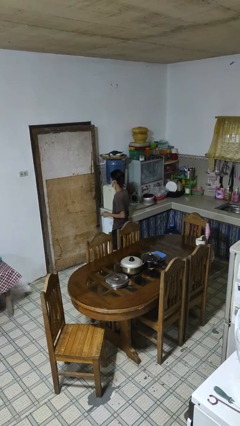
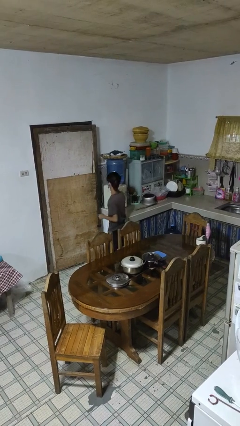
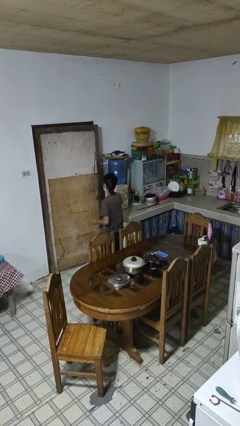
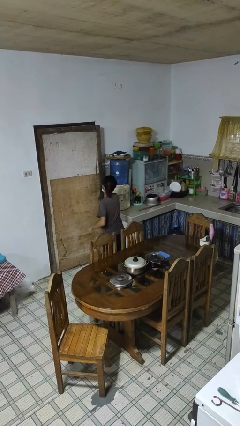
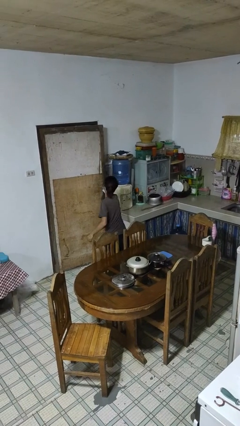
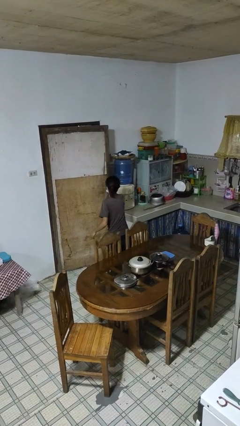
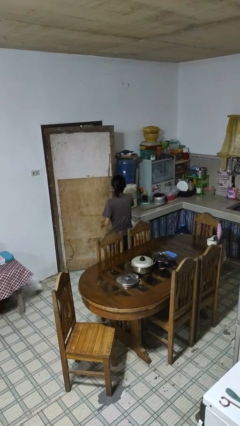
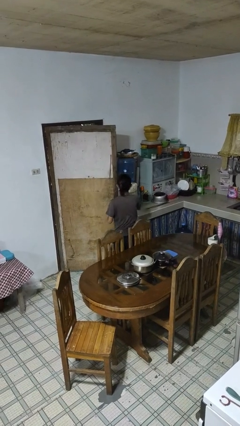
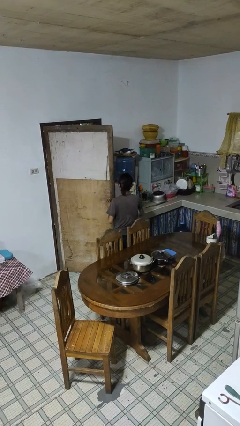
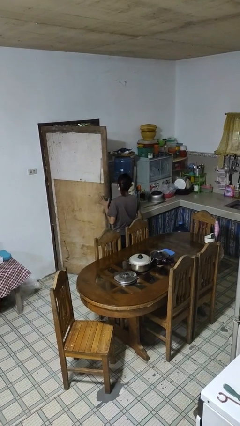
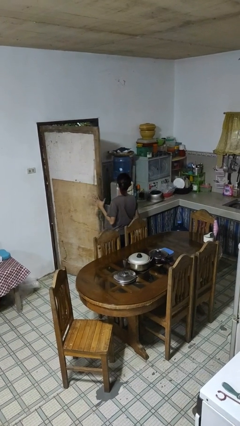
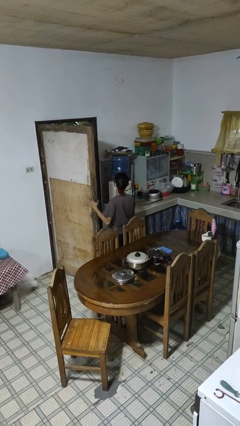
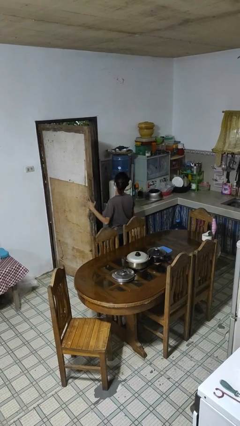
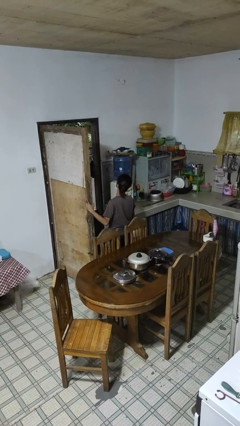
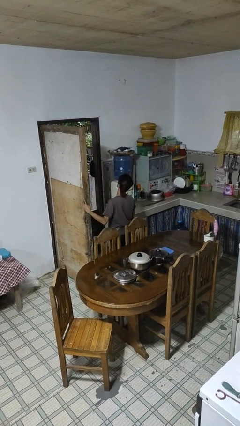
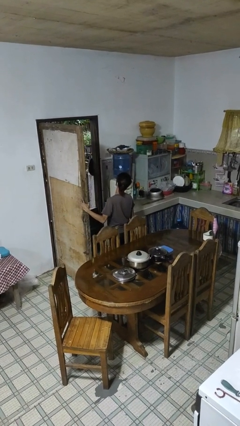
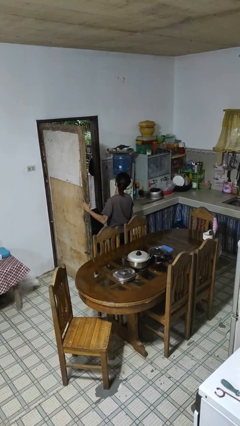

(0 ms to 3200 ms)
person opens facility door

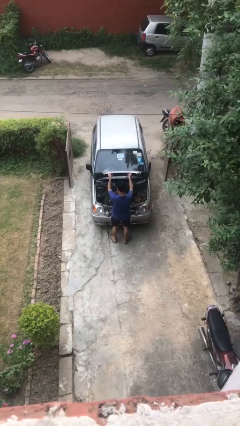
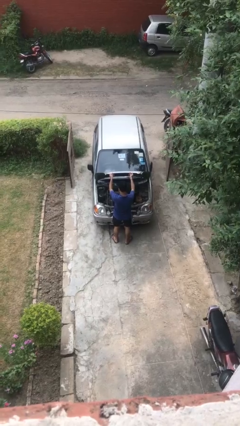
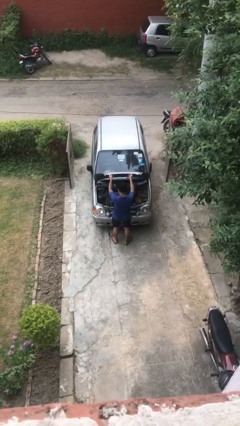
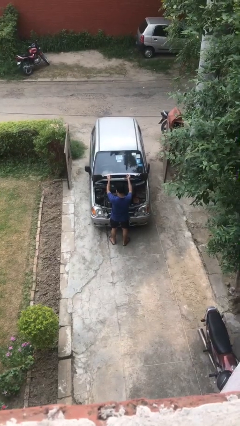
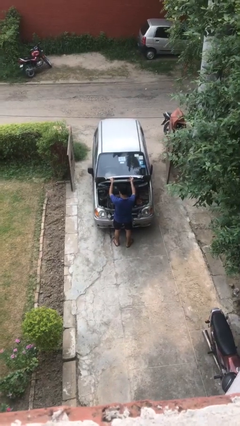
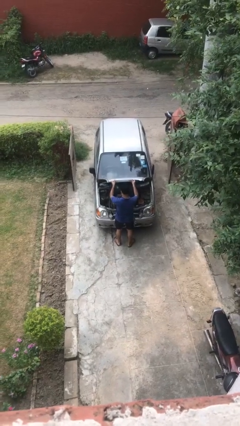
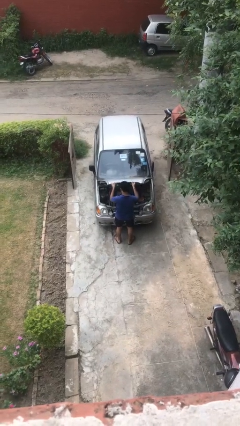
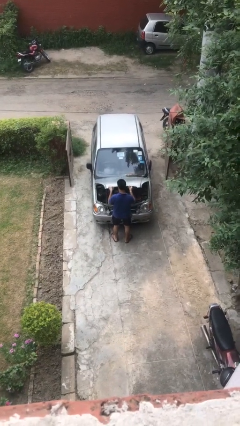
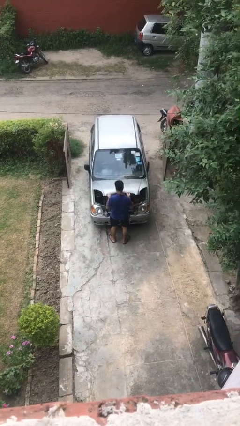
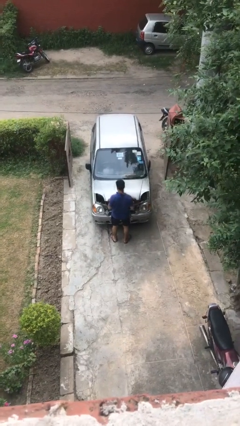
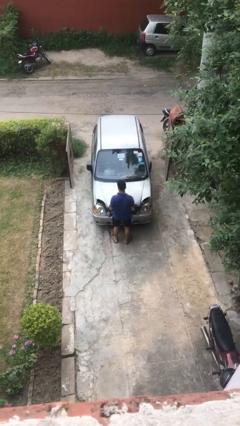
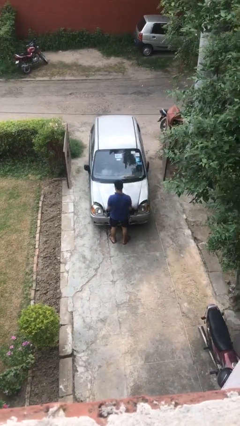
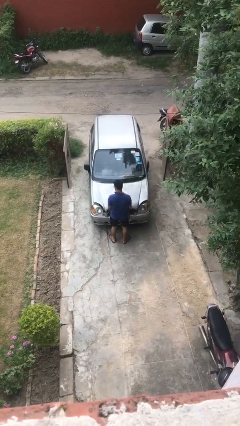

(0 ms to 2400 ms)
person closes car hood

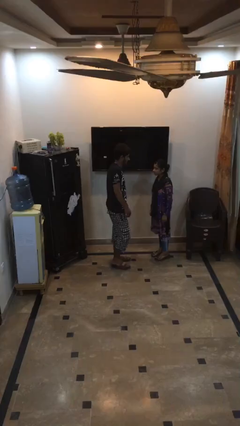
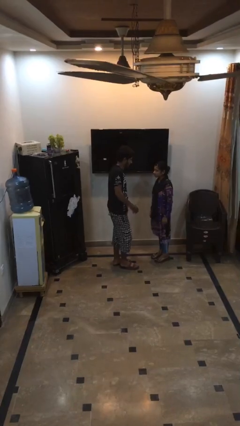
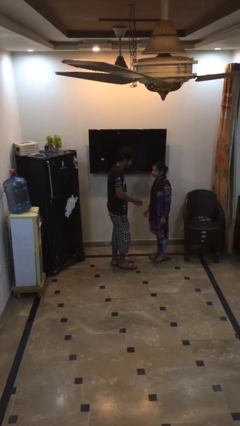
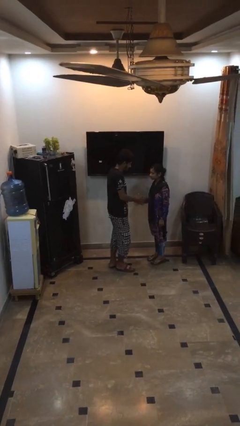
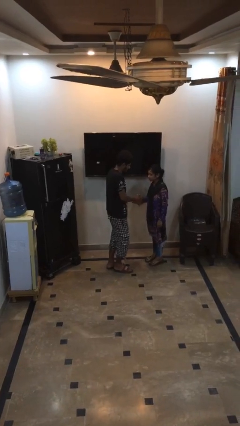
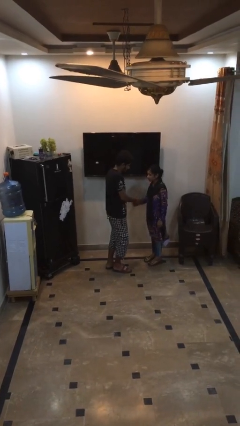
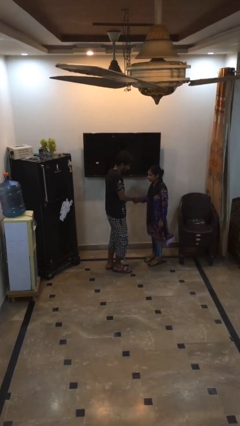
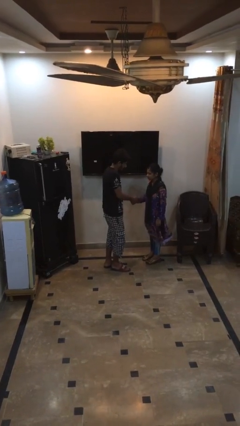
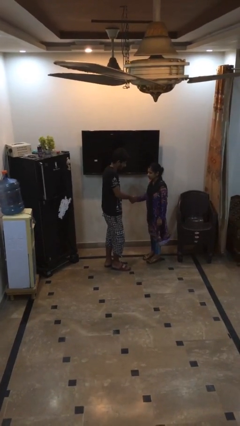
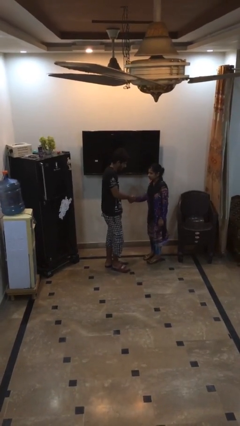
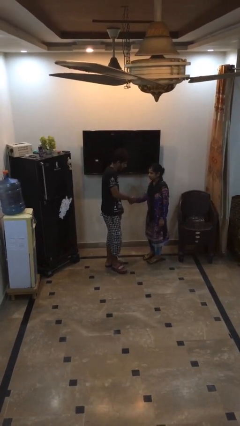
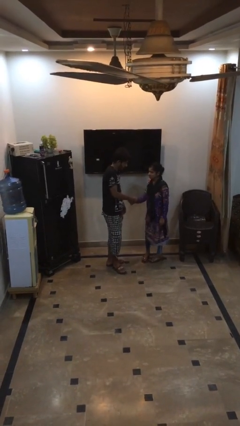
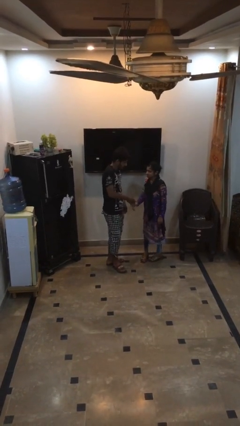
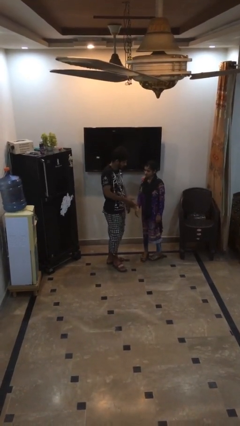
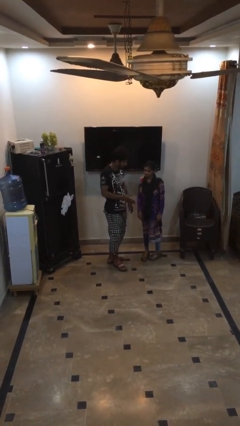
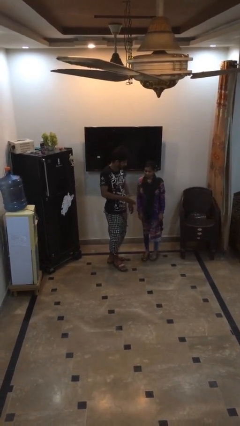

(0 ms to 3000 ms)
person shakes hand

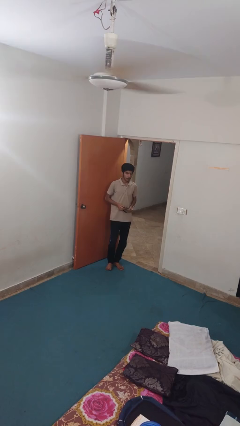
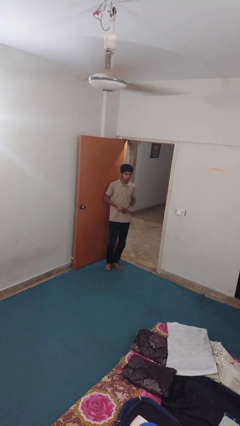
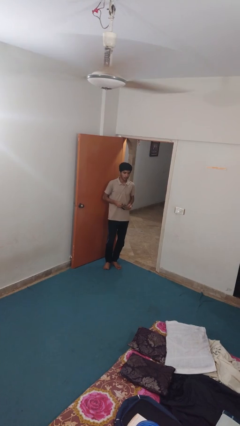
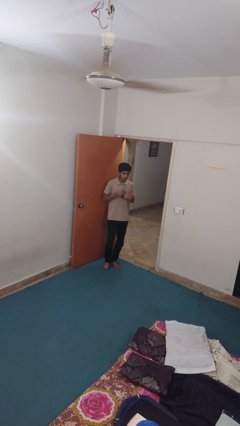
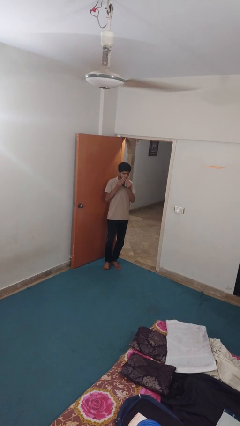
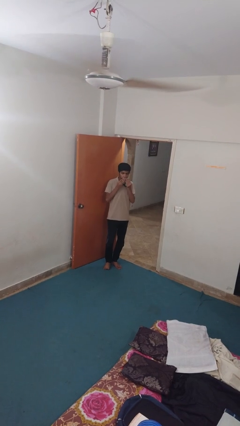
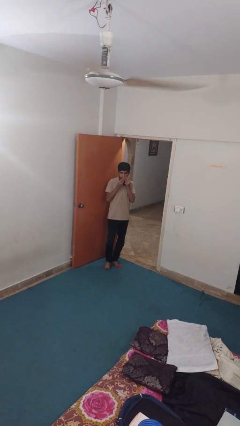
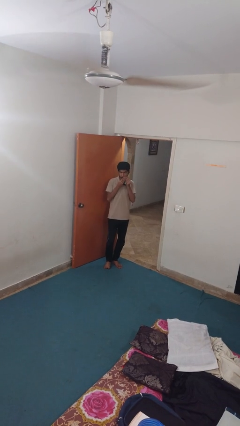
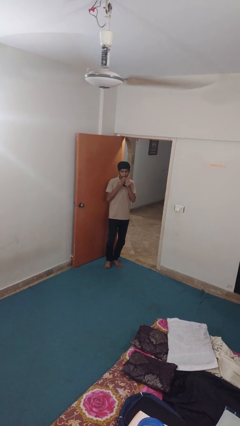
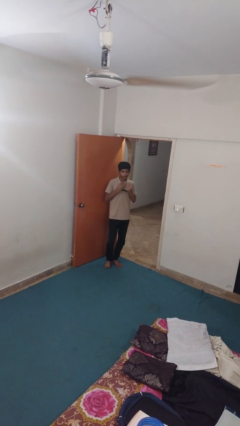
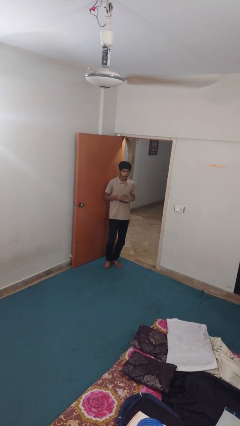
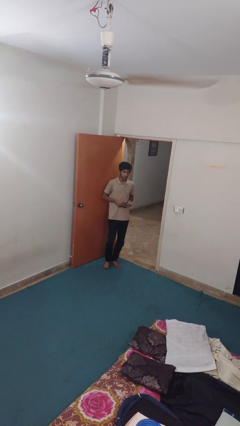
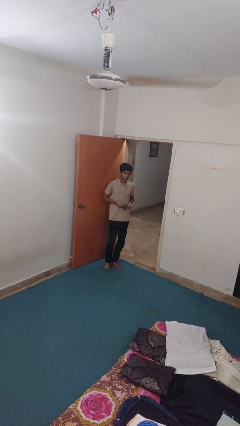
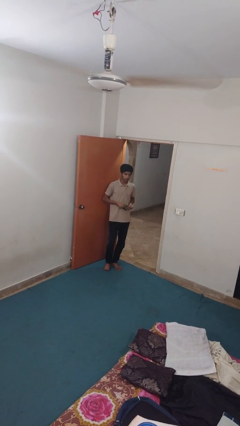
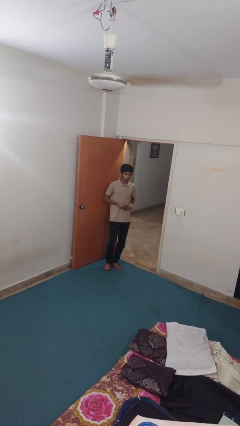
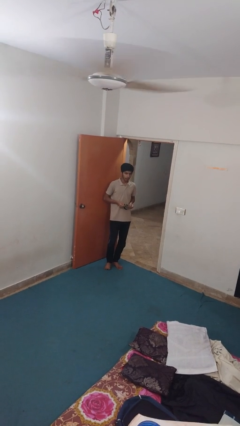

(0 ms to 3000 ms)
person wipes mouth with napkin

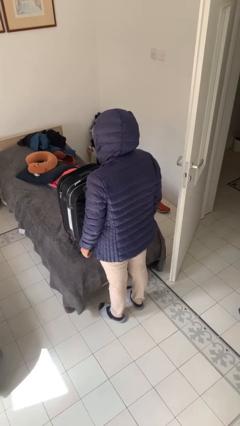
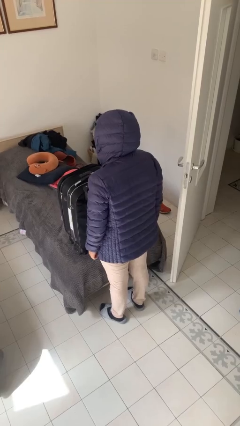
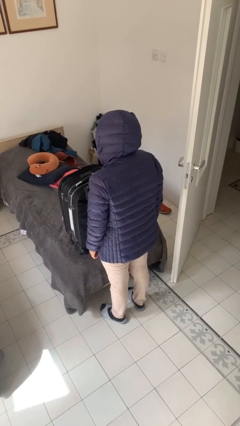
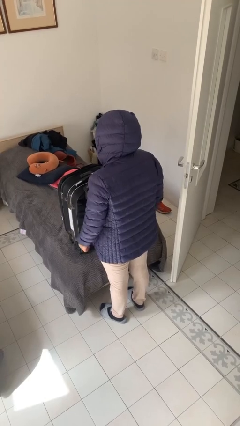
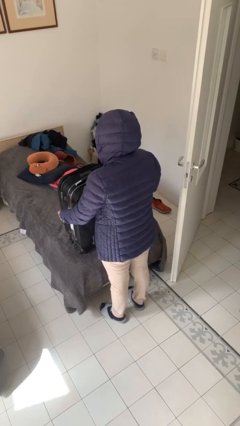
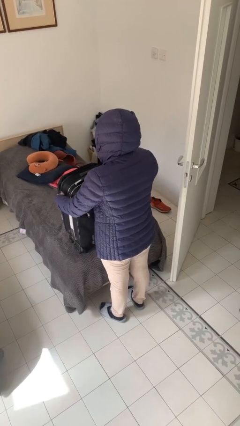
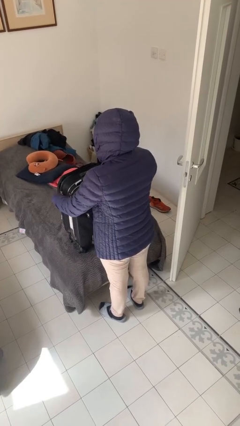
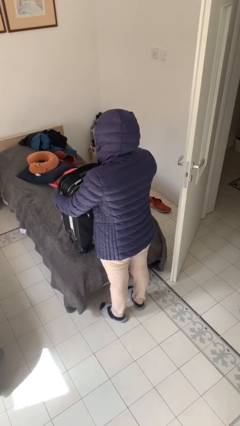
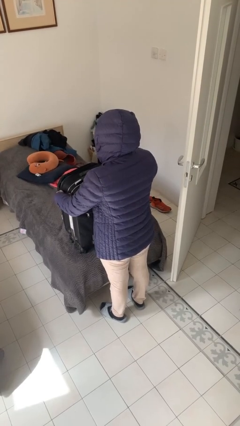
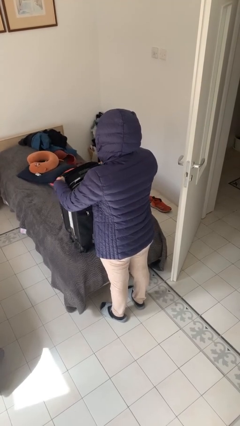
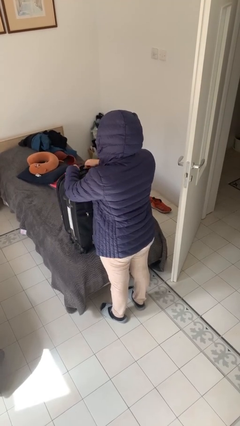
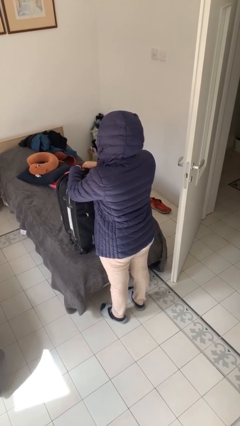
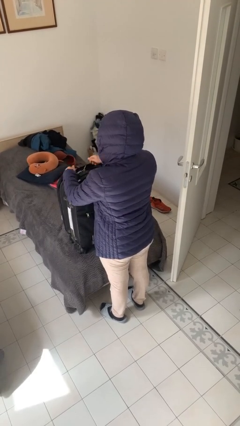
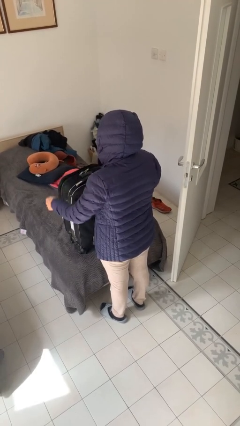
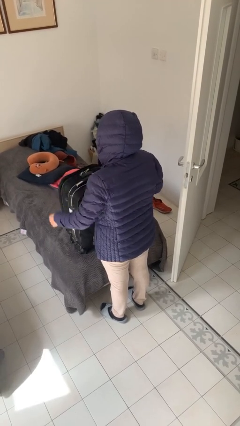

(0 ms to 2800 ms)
person closes suitcase

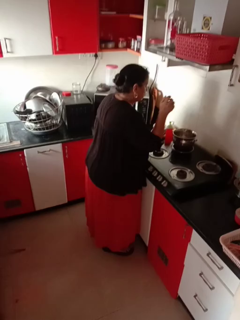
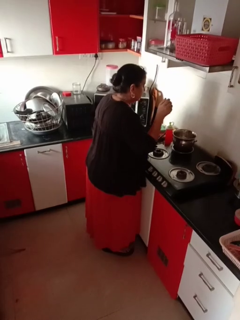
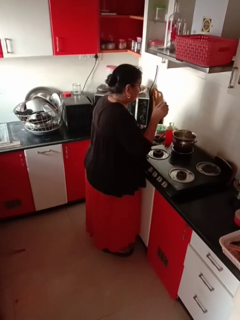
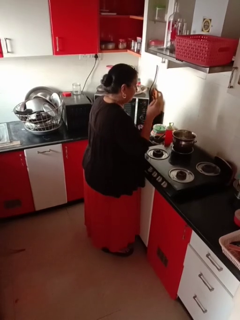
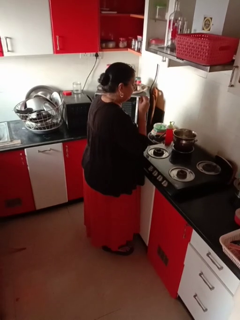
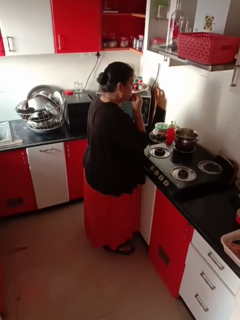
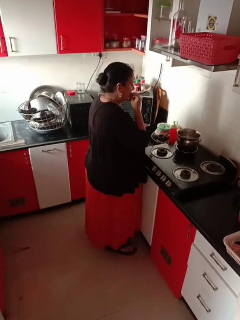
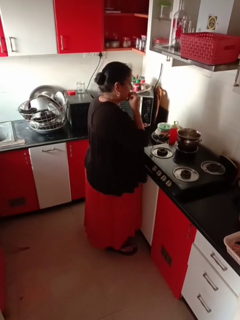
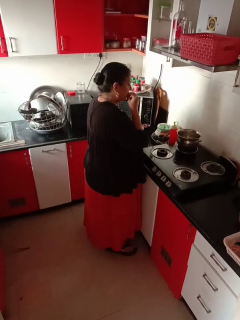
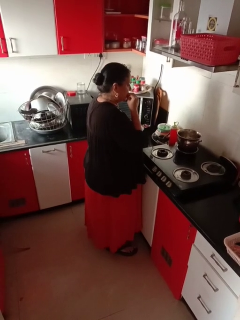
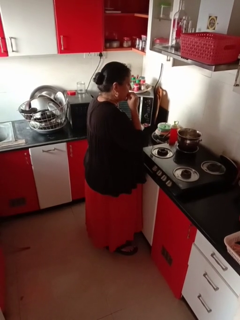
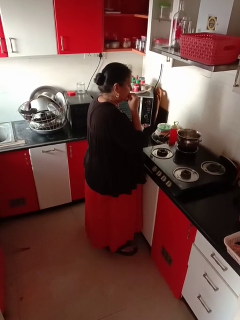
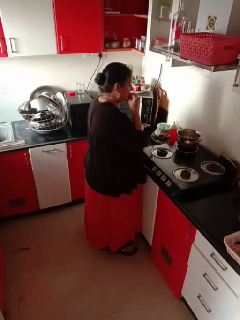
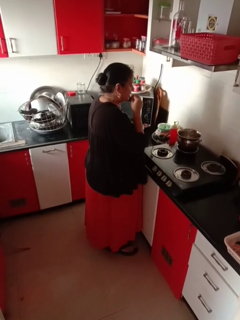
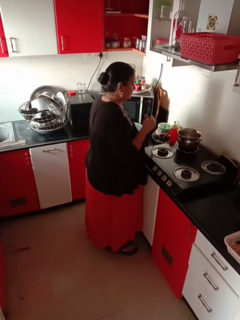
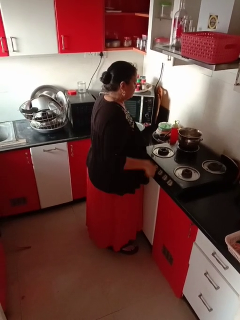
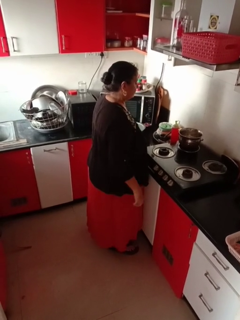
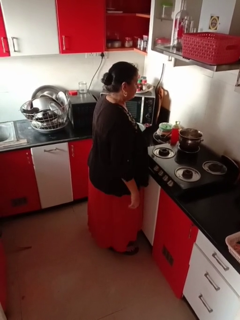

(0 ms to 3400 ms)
person burns hand

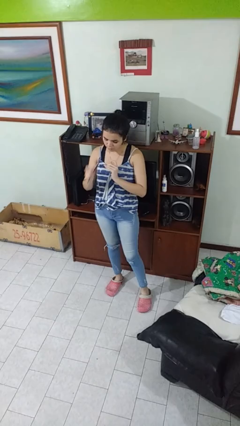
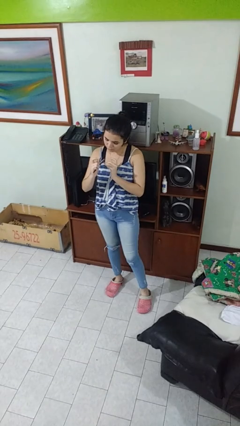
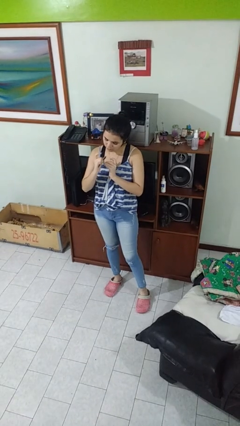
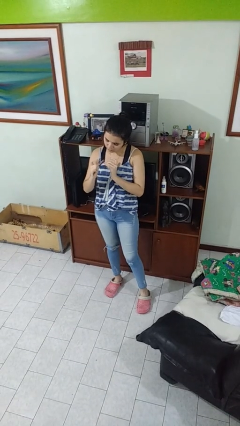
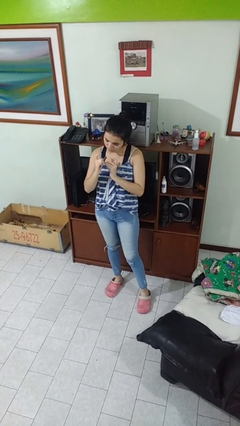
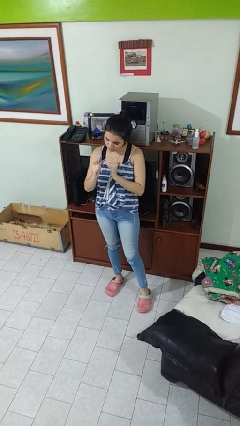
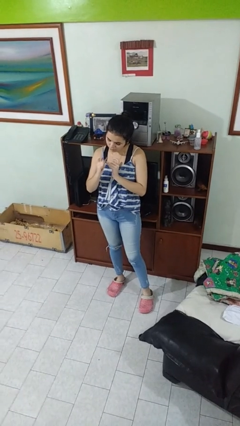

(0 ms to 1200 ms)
person files fingernails
